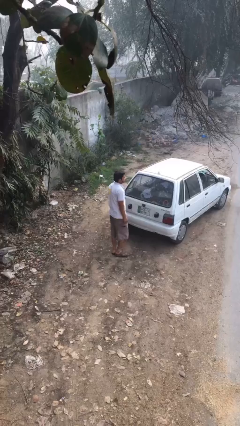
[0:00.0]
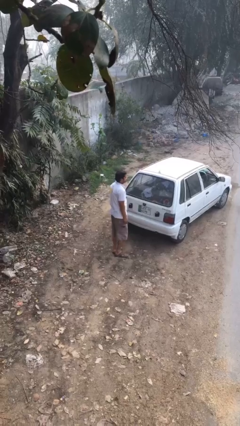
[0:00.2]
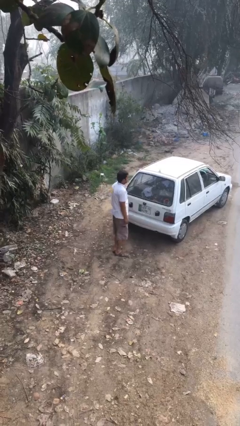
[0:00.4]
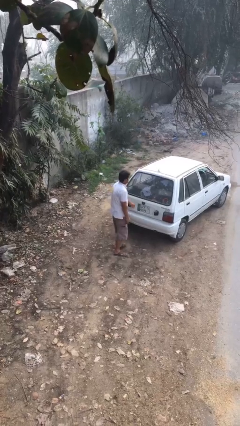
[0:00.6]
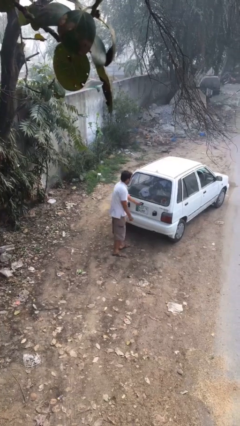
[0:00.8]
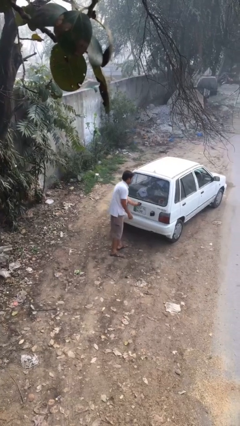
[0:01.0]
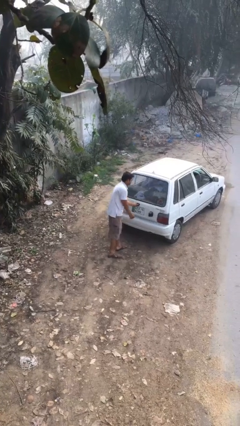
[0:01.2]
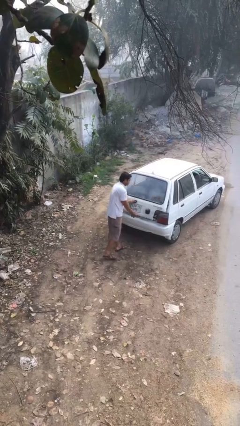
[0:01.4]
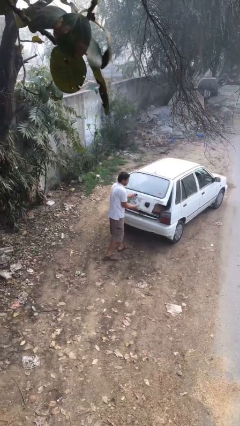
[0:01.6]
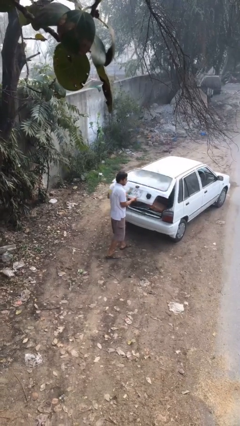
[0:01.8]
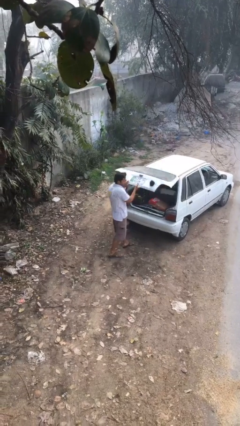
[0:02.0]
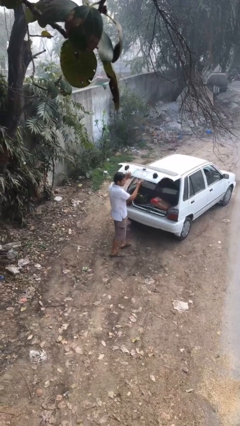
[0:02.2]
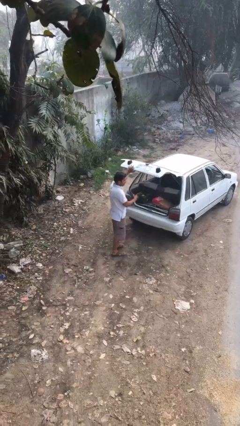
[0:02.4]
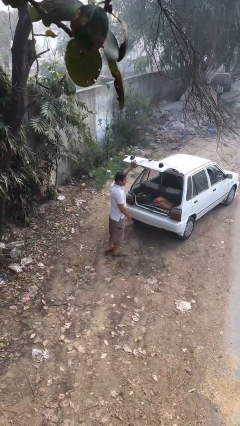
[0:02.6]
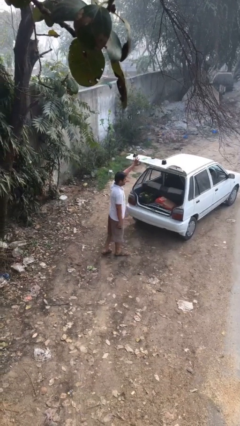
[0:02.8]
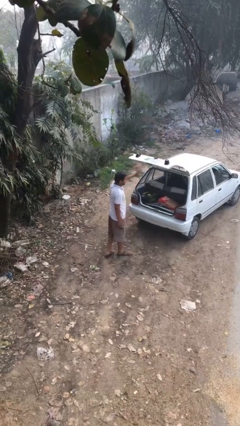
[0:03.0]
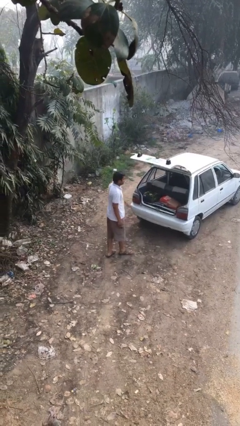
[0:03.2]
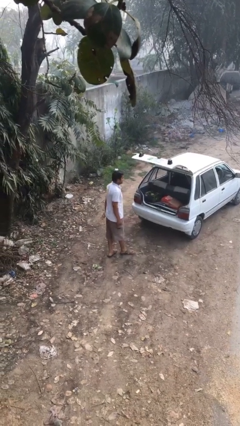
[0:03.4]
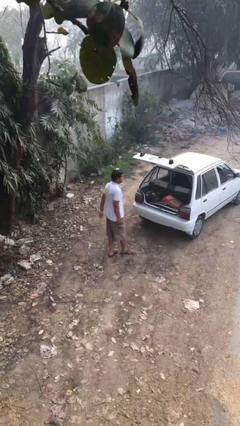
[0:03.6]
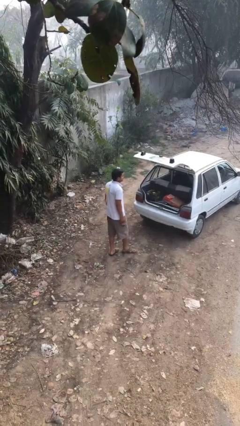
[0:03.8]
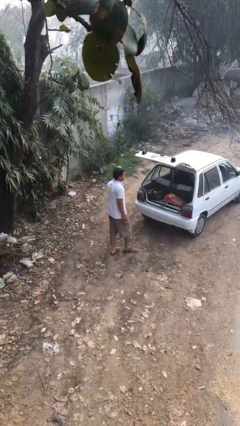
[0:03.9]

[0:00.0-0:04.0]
person opens car trunk

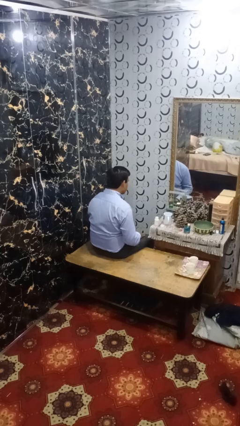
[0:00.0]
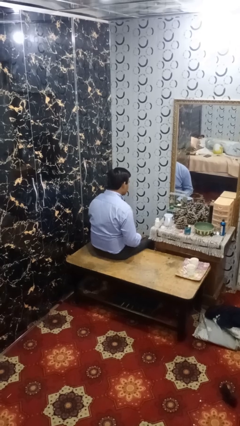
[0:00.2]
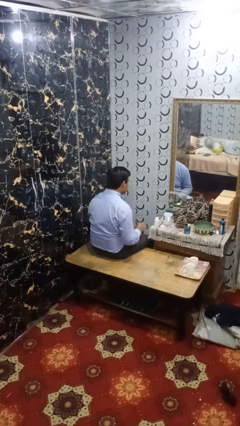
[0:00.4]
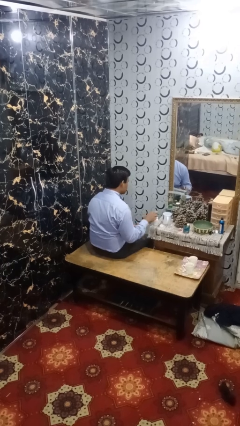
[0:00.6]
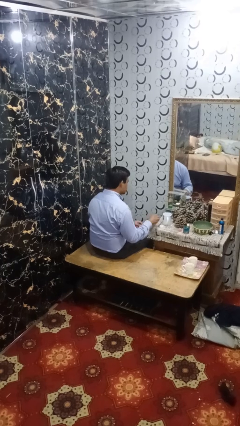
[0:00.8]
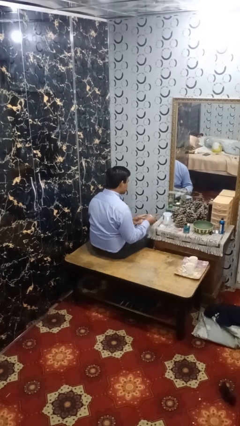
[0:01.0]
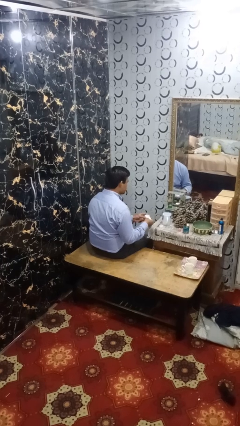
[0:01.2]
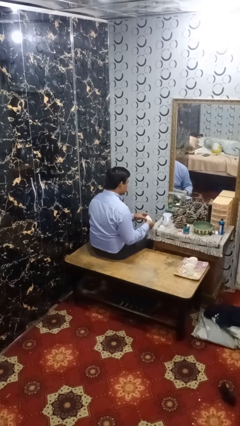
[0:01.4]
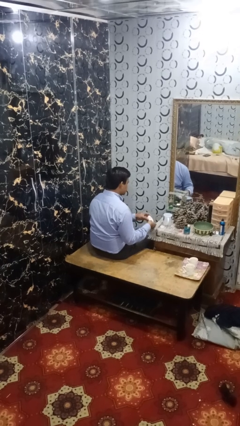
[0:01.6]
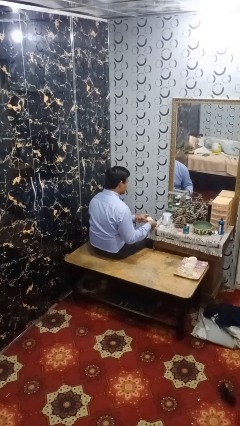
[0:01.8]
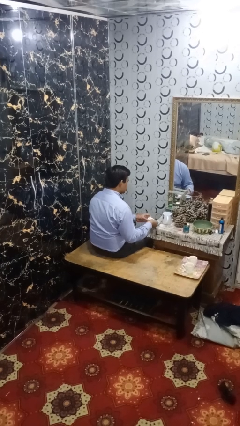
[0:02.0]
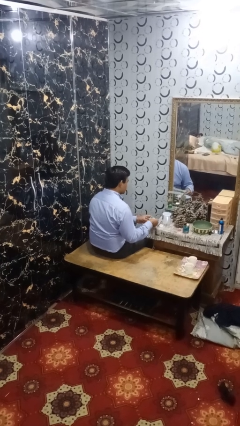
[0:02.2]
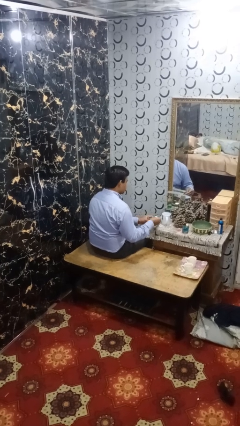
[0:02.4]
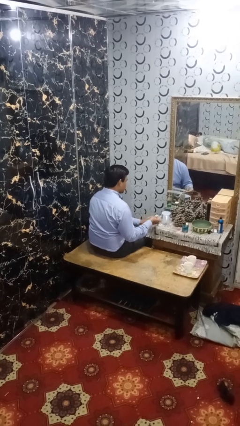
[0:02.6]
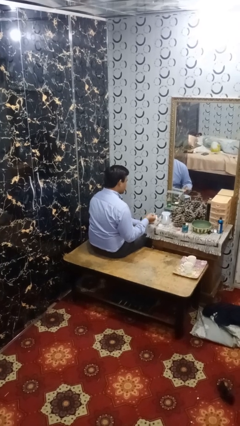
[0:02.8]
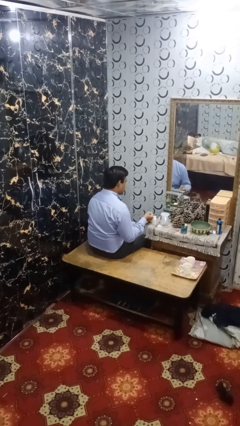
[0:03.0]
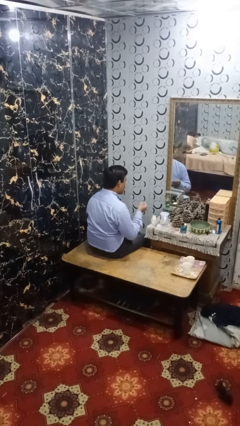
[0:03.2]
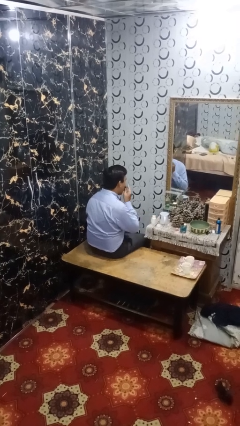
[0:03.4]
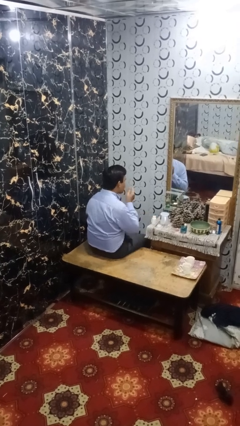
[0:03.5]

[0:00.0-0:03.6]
person takes medicine pills

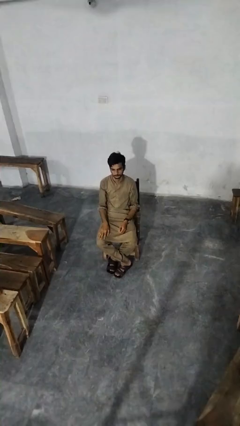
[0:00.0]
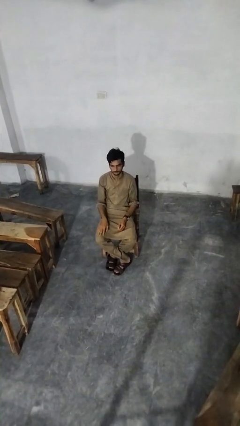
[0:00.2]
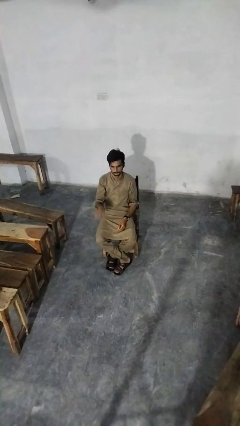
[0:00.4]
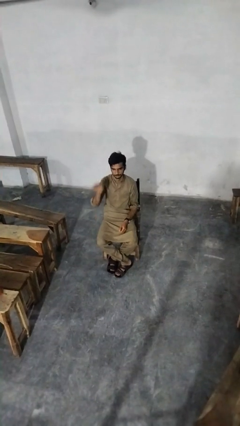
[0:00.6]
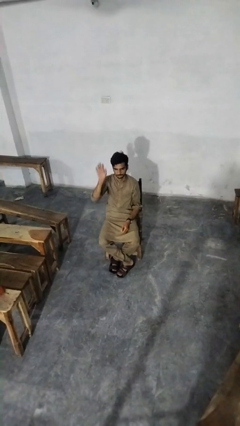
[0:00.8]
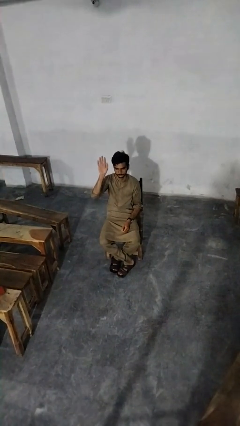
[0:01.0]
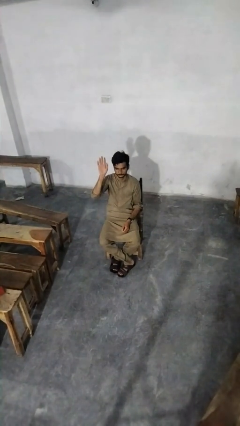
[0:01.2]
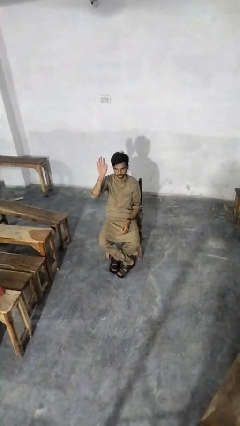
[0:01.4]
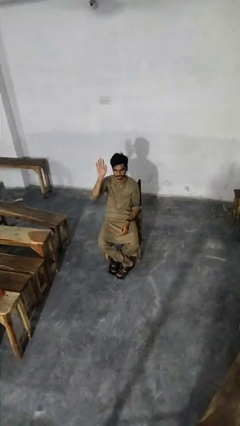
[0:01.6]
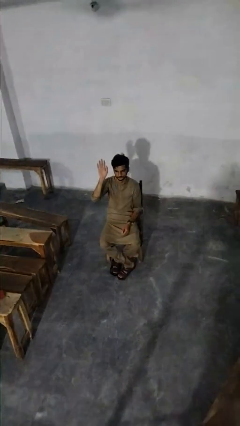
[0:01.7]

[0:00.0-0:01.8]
person gestures raise hand

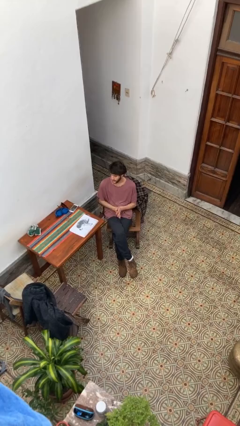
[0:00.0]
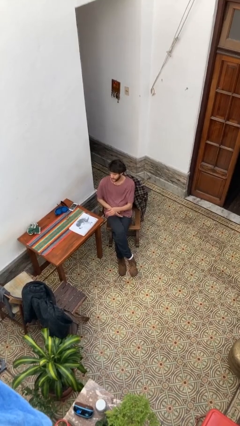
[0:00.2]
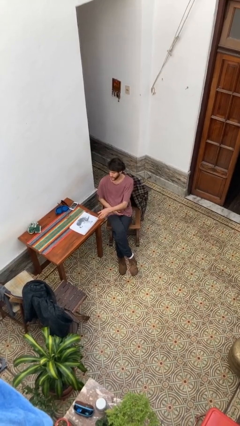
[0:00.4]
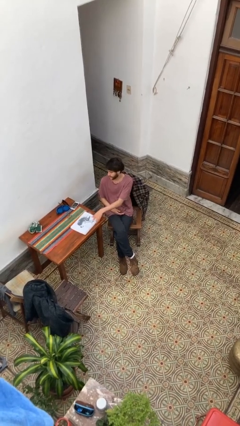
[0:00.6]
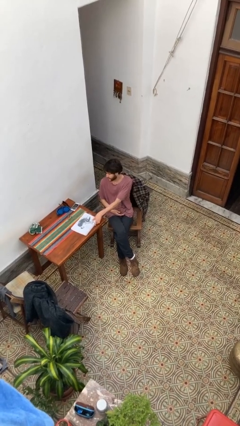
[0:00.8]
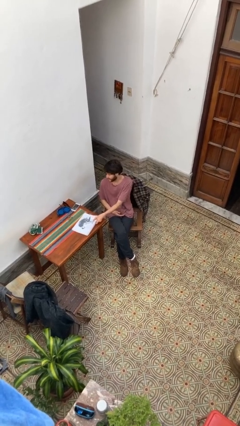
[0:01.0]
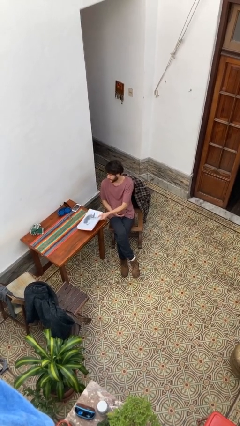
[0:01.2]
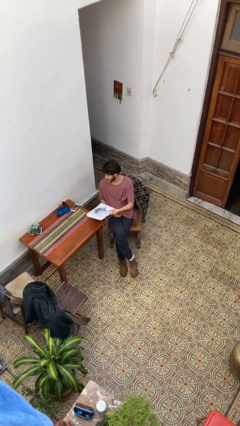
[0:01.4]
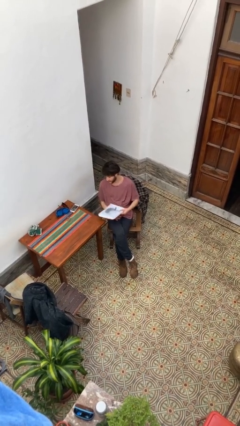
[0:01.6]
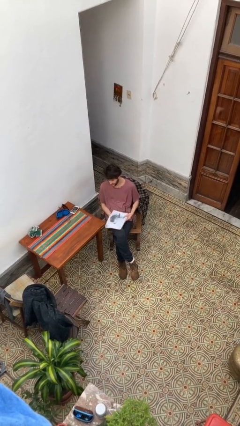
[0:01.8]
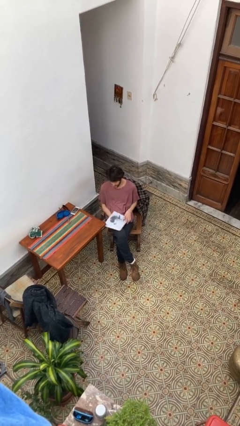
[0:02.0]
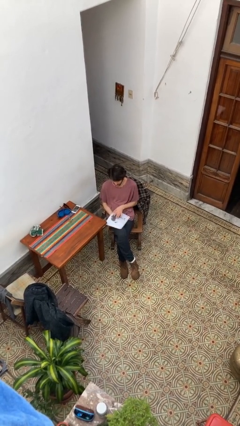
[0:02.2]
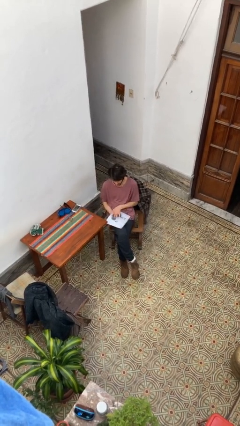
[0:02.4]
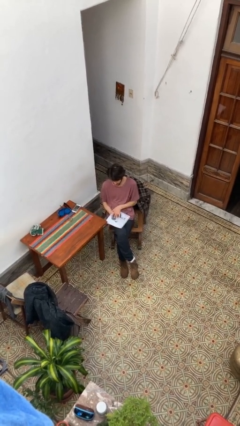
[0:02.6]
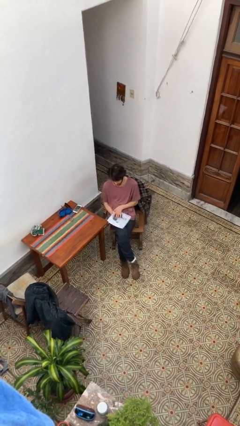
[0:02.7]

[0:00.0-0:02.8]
person picks up object from table

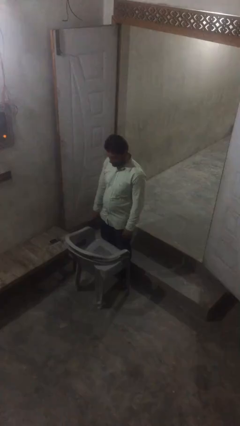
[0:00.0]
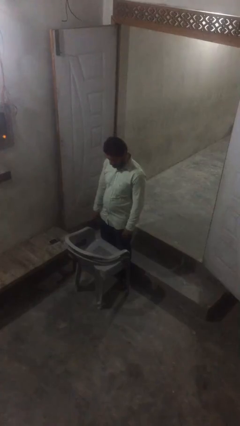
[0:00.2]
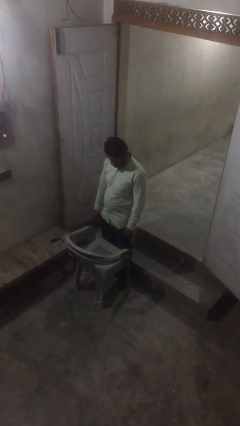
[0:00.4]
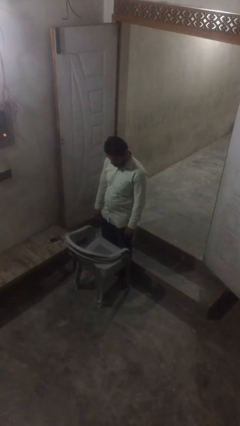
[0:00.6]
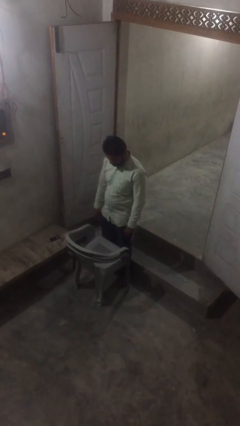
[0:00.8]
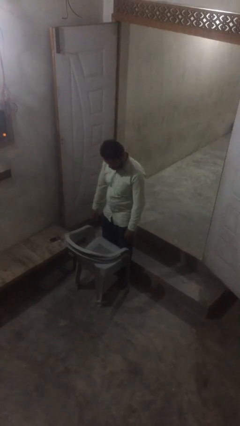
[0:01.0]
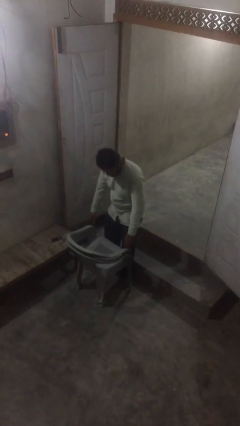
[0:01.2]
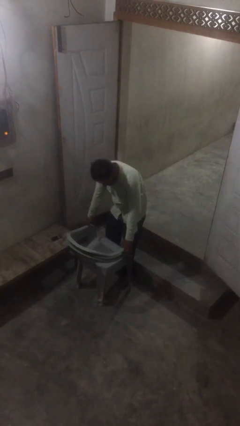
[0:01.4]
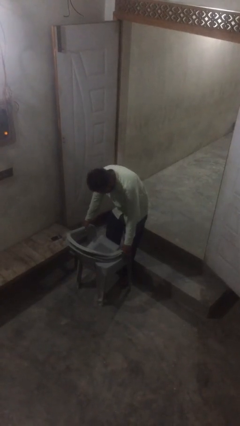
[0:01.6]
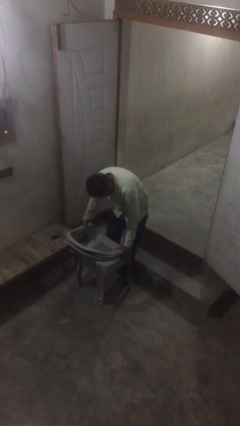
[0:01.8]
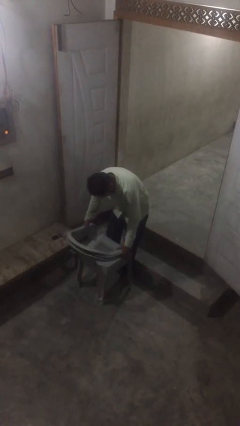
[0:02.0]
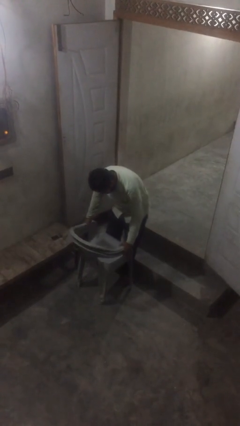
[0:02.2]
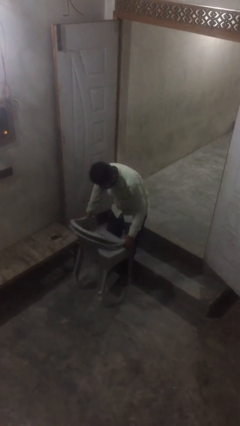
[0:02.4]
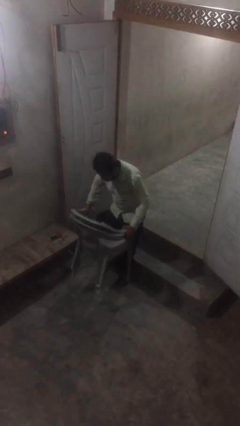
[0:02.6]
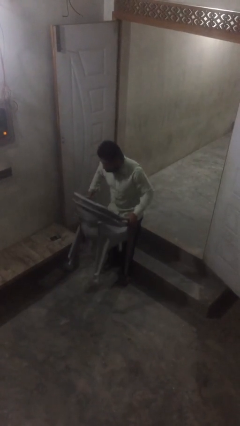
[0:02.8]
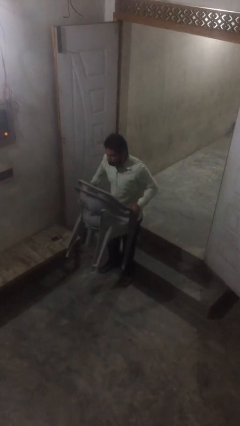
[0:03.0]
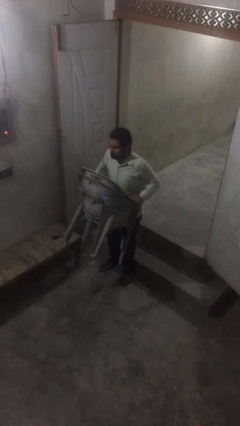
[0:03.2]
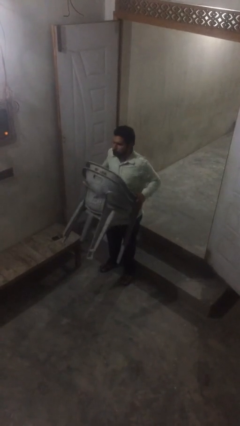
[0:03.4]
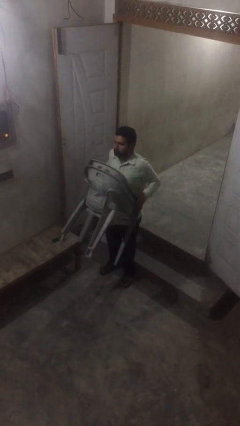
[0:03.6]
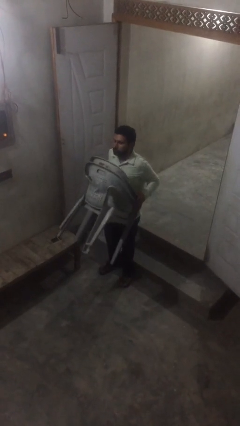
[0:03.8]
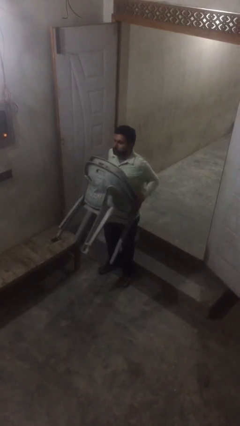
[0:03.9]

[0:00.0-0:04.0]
person picks up object from floor

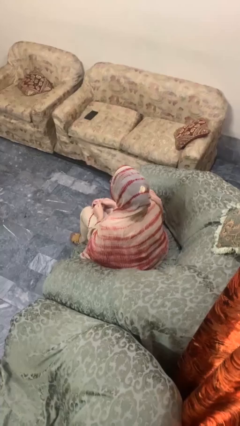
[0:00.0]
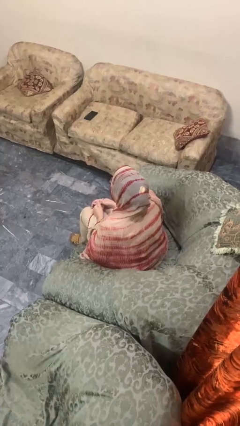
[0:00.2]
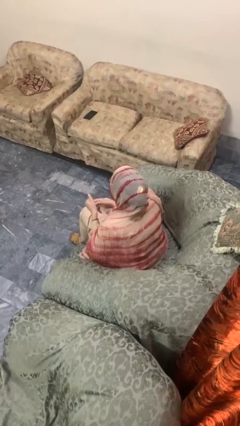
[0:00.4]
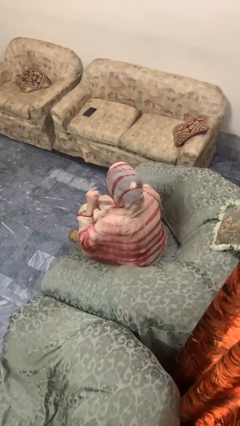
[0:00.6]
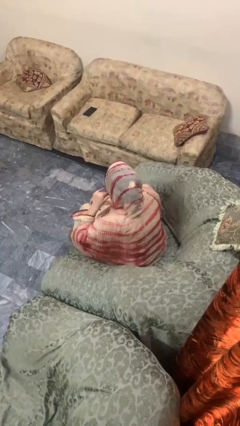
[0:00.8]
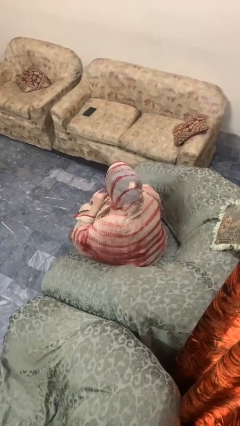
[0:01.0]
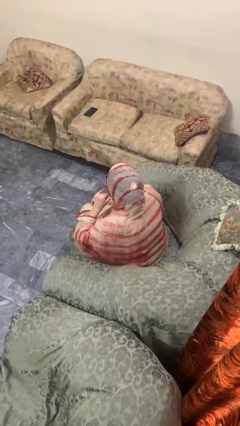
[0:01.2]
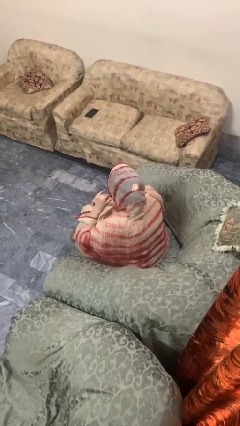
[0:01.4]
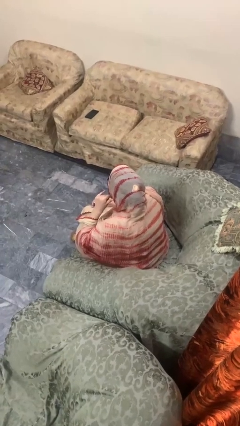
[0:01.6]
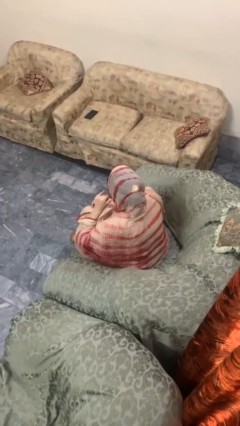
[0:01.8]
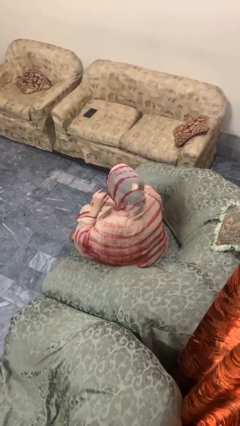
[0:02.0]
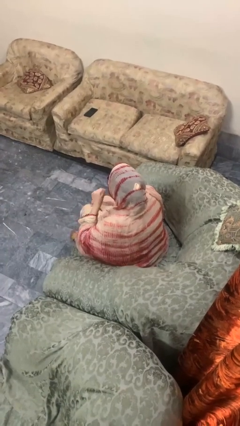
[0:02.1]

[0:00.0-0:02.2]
person gestures call me
